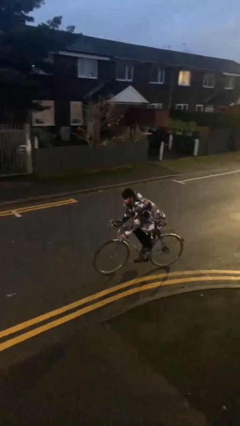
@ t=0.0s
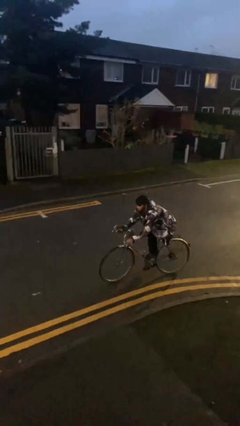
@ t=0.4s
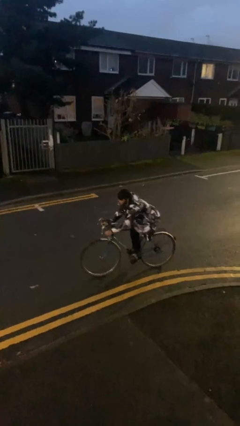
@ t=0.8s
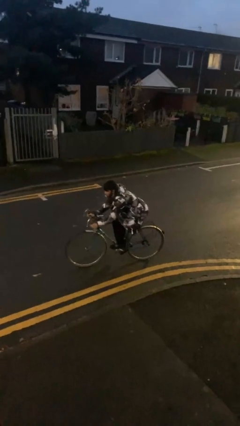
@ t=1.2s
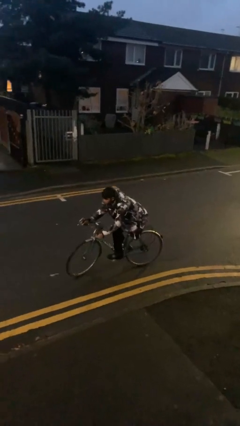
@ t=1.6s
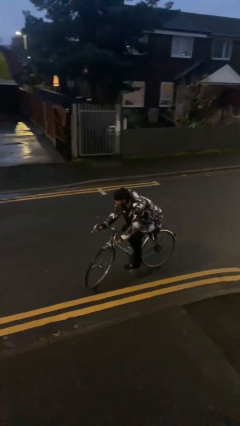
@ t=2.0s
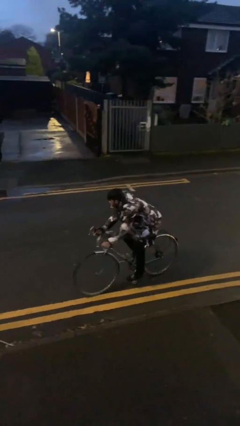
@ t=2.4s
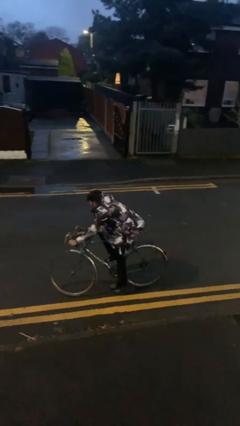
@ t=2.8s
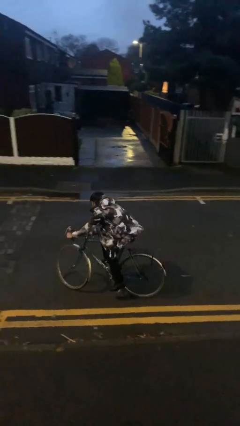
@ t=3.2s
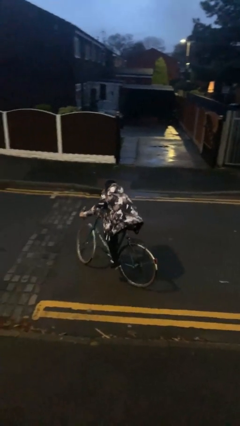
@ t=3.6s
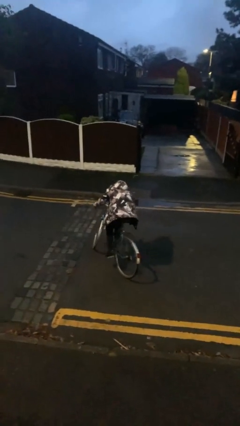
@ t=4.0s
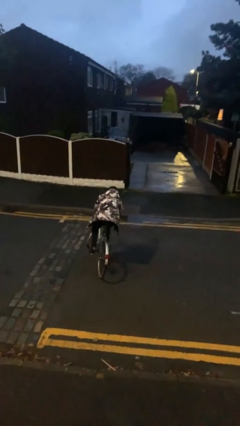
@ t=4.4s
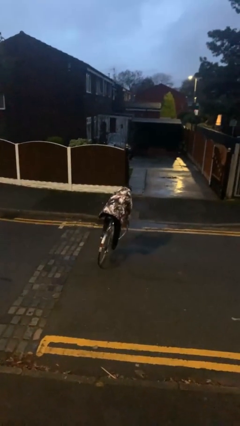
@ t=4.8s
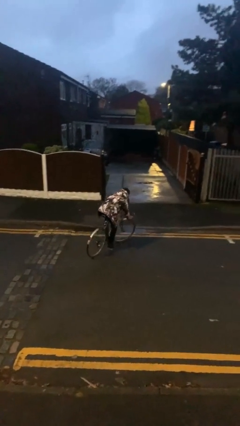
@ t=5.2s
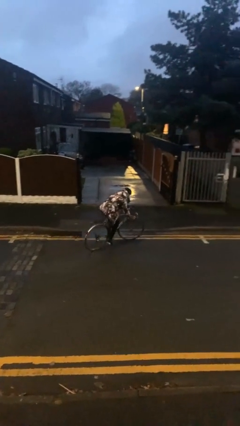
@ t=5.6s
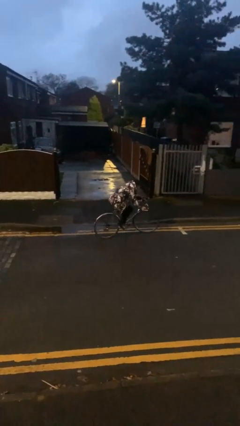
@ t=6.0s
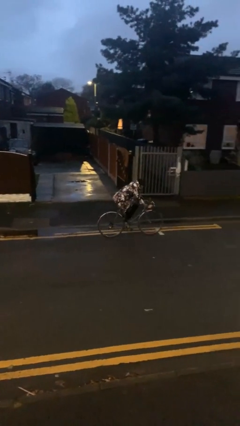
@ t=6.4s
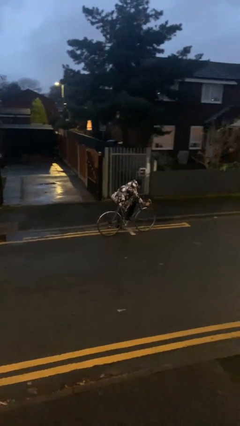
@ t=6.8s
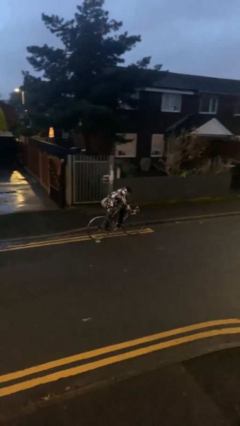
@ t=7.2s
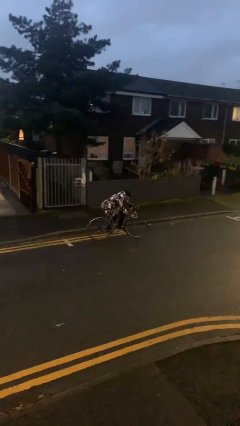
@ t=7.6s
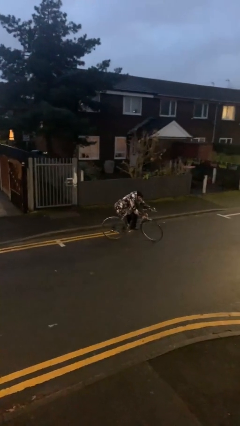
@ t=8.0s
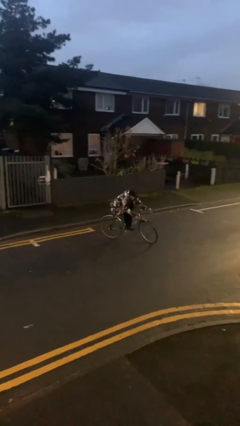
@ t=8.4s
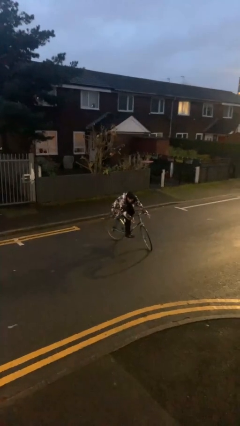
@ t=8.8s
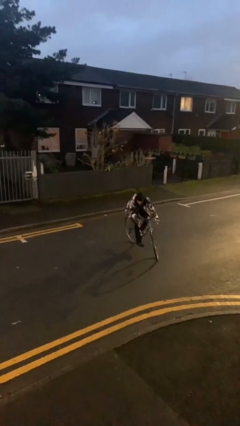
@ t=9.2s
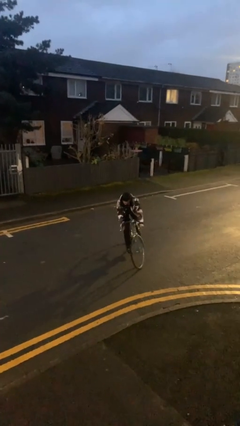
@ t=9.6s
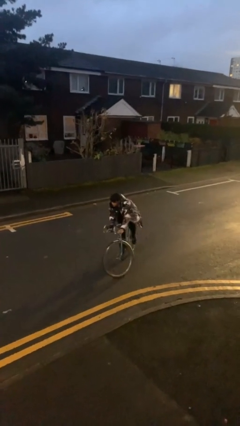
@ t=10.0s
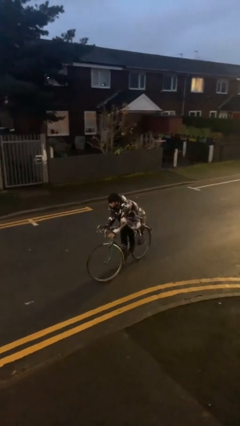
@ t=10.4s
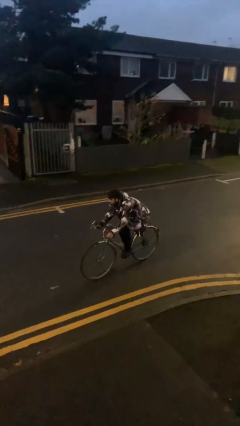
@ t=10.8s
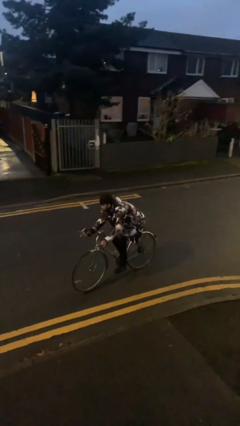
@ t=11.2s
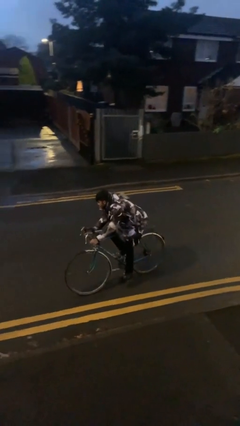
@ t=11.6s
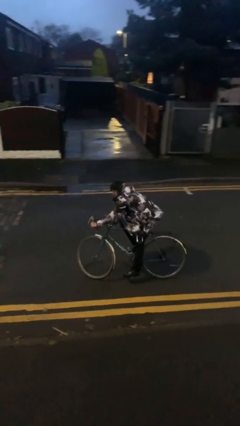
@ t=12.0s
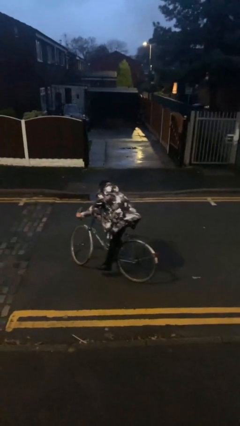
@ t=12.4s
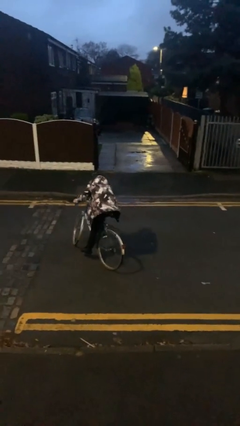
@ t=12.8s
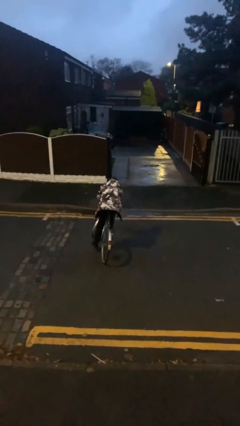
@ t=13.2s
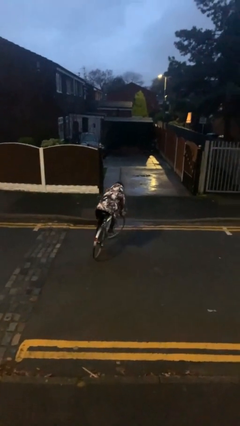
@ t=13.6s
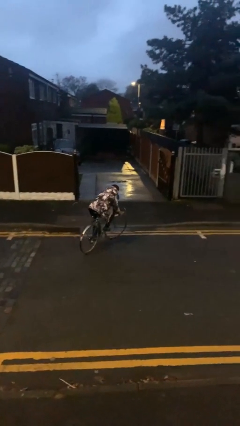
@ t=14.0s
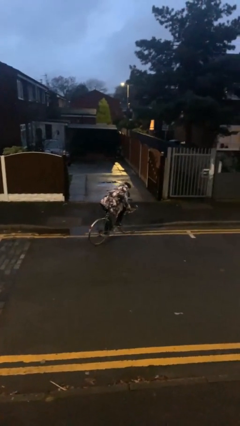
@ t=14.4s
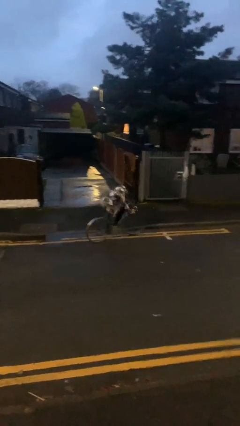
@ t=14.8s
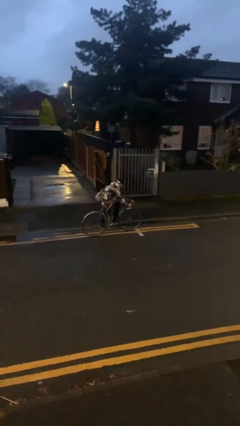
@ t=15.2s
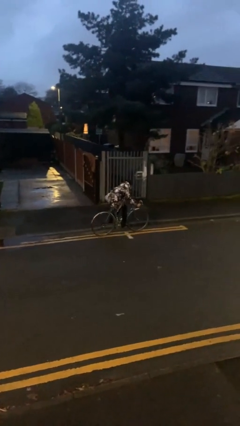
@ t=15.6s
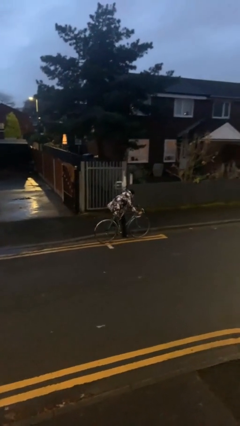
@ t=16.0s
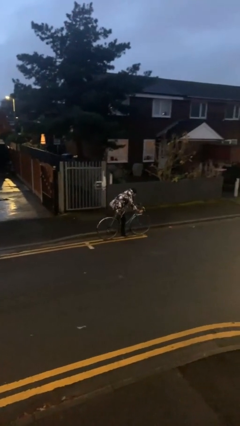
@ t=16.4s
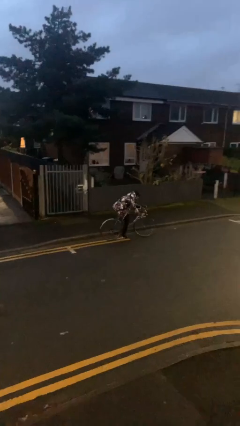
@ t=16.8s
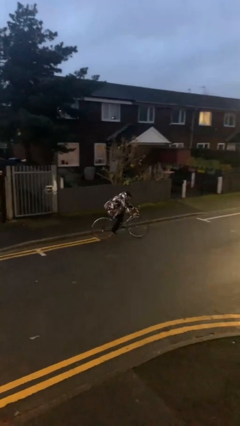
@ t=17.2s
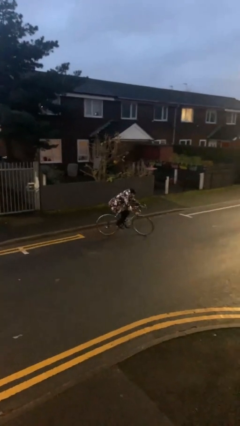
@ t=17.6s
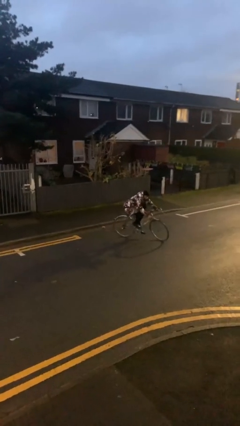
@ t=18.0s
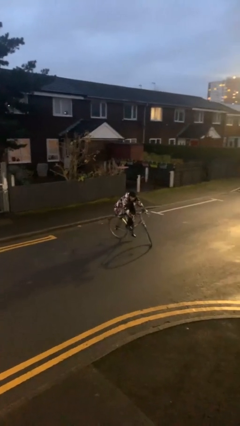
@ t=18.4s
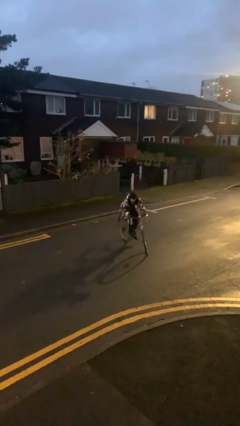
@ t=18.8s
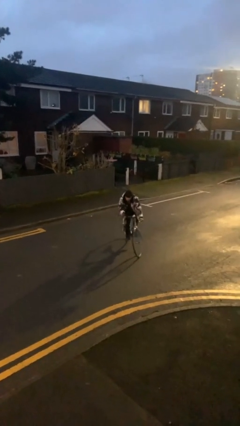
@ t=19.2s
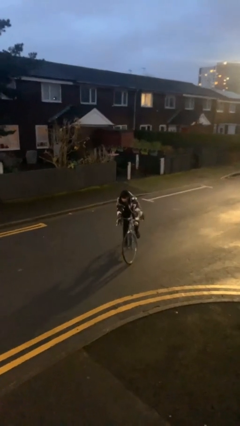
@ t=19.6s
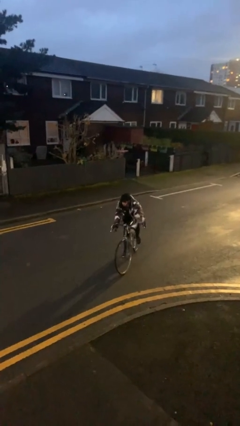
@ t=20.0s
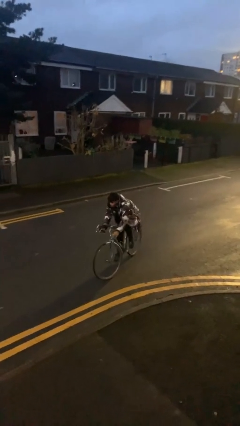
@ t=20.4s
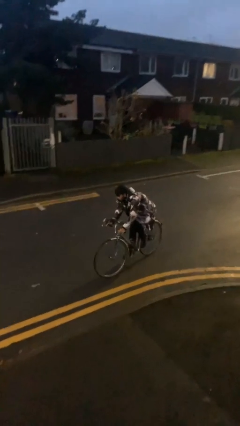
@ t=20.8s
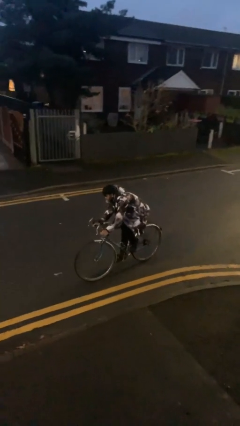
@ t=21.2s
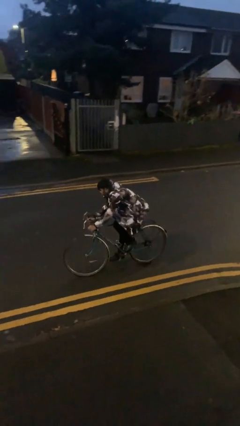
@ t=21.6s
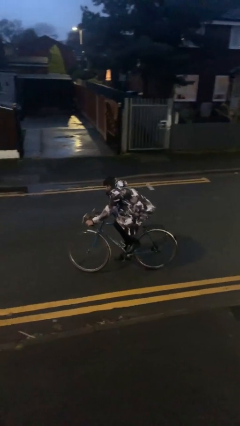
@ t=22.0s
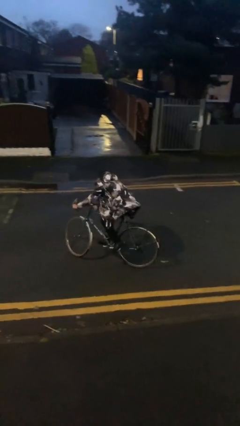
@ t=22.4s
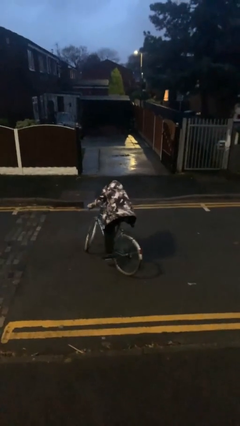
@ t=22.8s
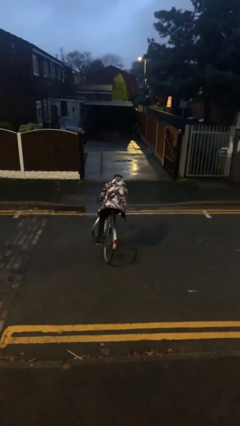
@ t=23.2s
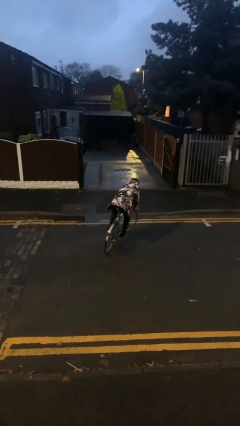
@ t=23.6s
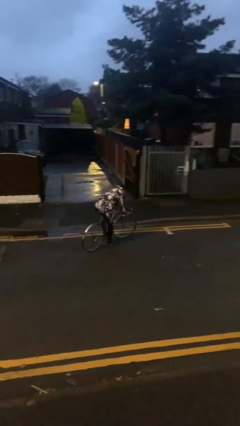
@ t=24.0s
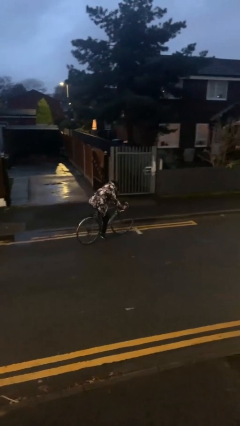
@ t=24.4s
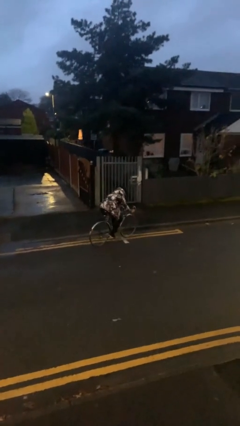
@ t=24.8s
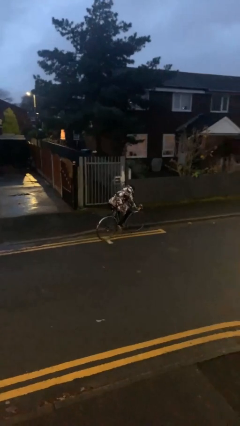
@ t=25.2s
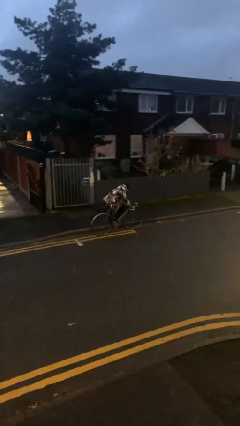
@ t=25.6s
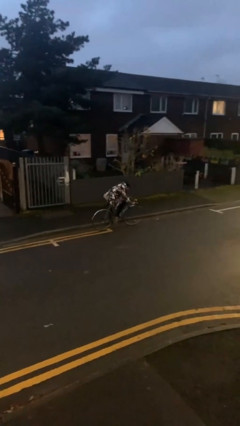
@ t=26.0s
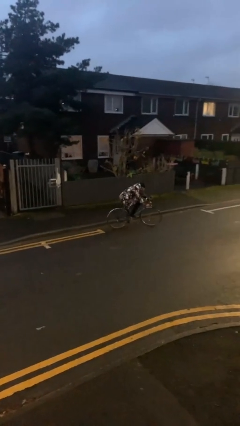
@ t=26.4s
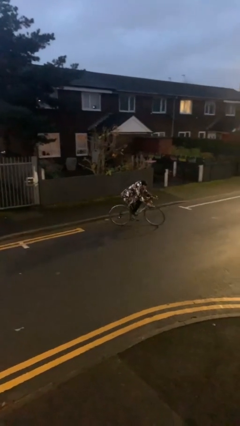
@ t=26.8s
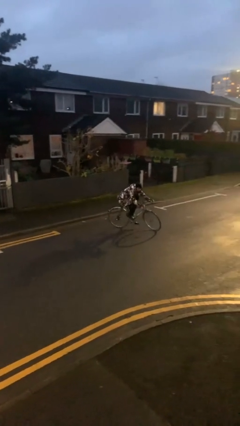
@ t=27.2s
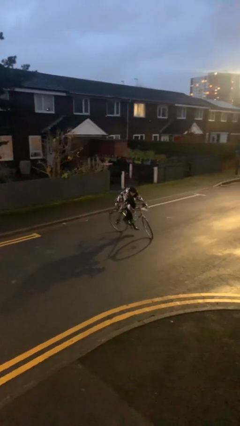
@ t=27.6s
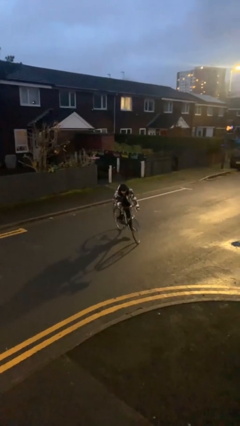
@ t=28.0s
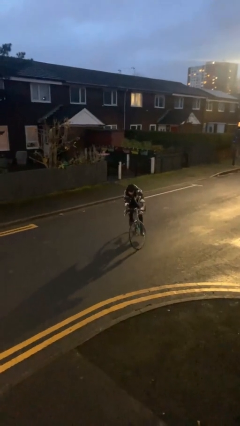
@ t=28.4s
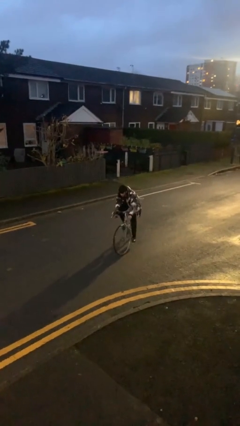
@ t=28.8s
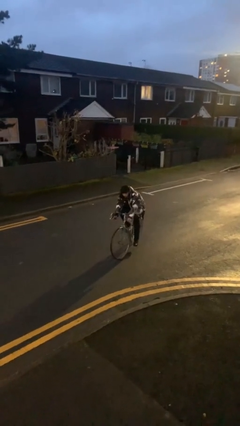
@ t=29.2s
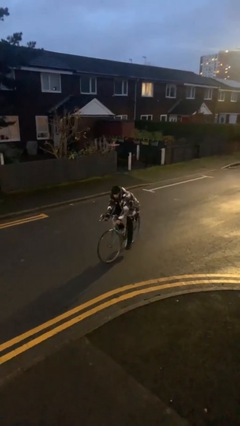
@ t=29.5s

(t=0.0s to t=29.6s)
person rides bicycle

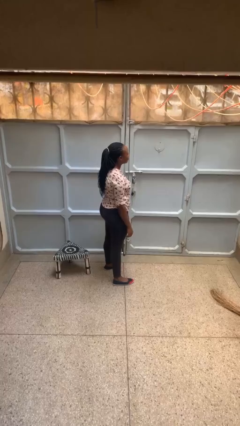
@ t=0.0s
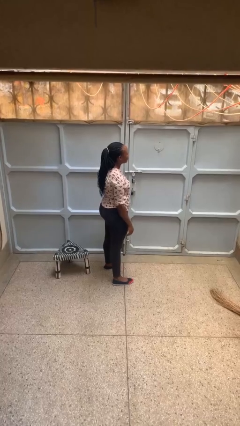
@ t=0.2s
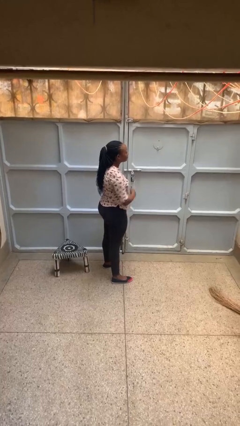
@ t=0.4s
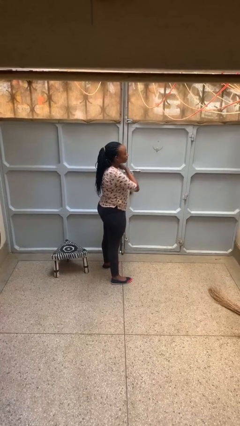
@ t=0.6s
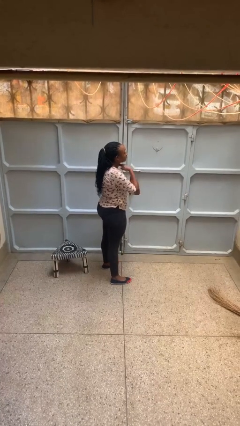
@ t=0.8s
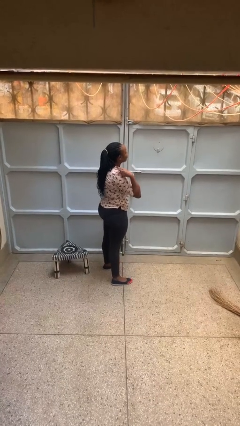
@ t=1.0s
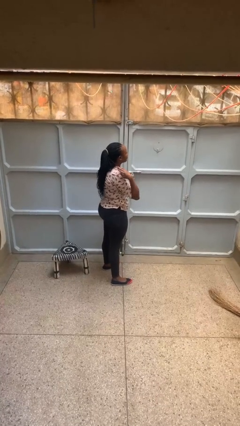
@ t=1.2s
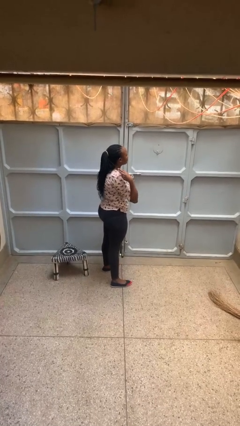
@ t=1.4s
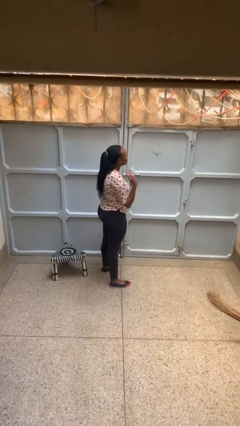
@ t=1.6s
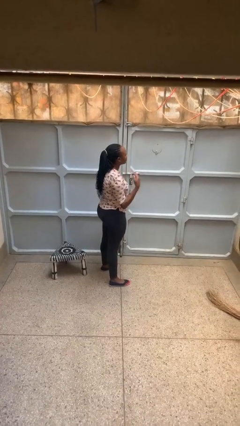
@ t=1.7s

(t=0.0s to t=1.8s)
person gestures cut

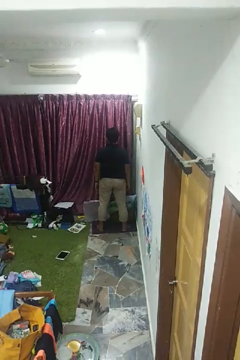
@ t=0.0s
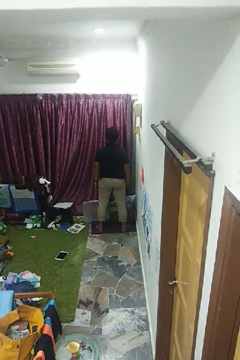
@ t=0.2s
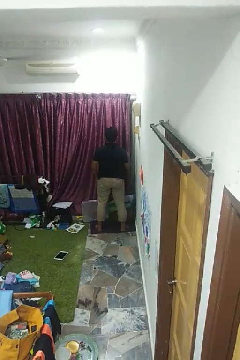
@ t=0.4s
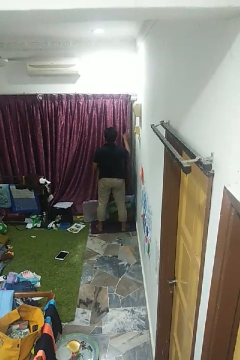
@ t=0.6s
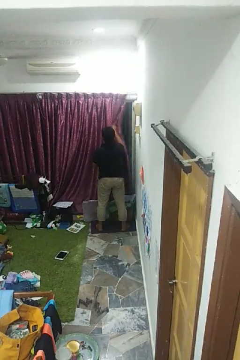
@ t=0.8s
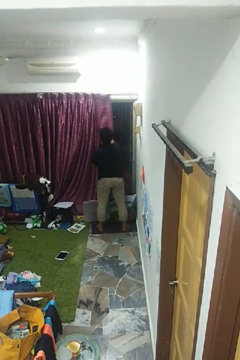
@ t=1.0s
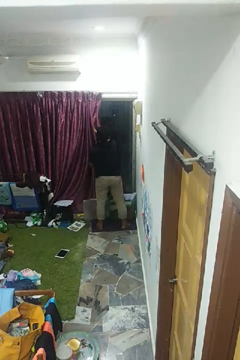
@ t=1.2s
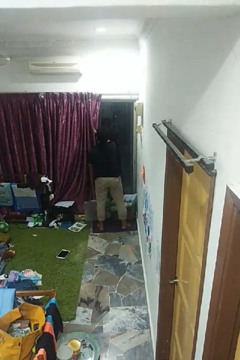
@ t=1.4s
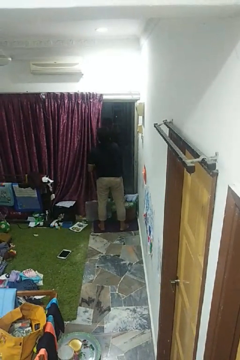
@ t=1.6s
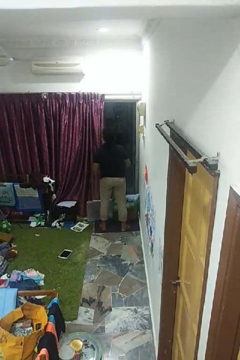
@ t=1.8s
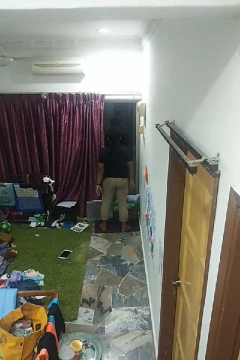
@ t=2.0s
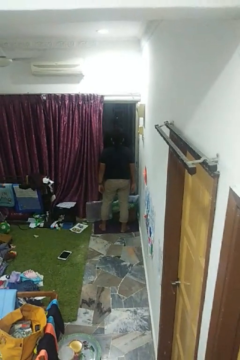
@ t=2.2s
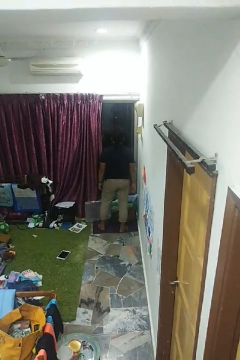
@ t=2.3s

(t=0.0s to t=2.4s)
person opens curtains
